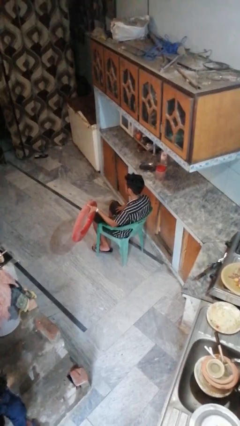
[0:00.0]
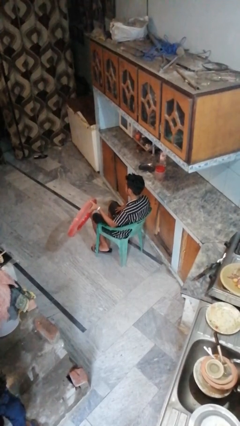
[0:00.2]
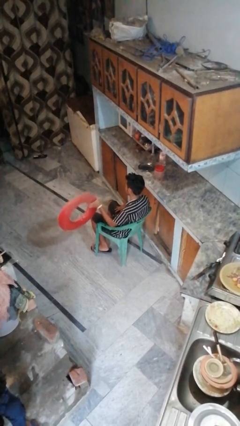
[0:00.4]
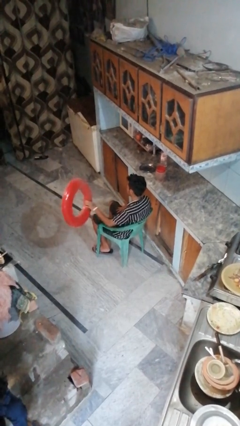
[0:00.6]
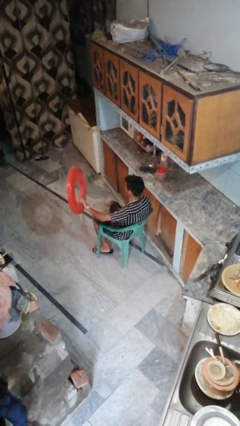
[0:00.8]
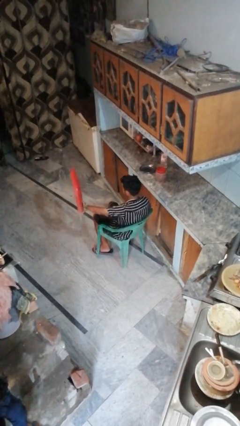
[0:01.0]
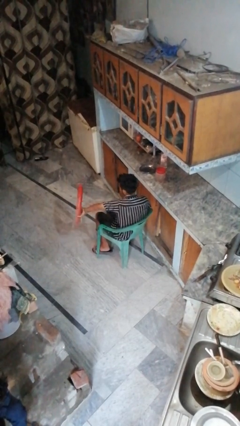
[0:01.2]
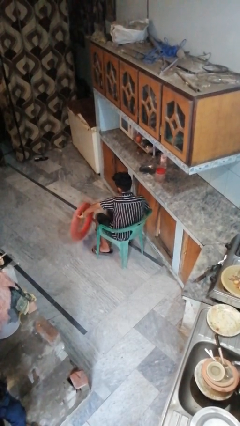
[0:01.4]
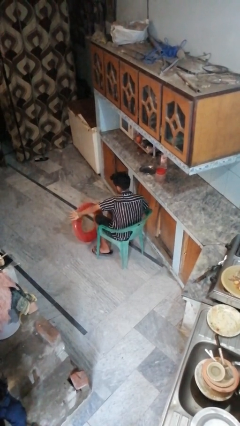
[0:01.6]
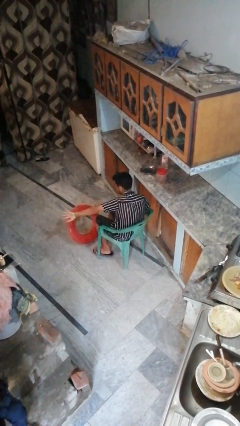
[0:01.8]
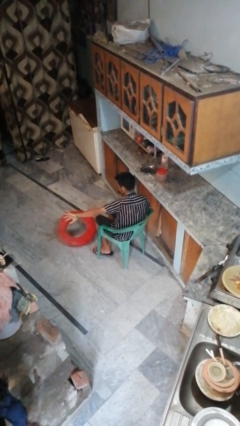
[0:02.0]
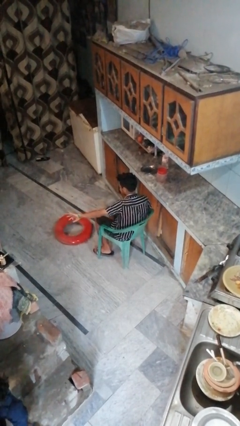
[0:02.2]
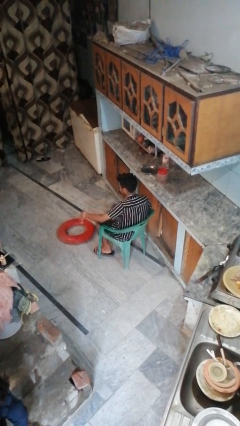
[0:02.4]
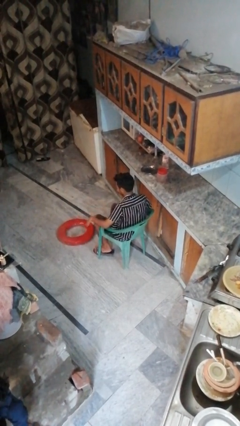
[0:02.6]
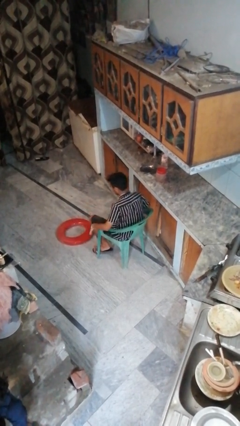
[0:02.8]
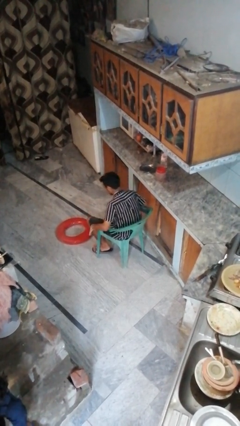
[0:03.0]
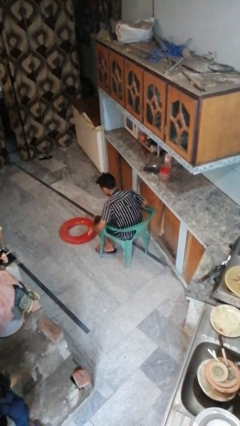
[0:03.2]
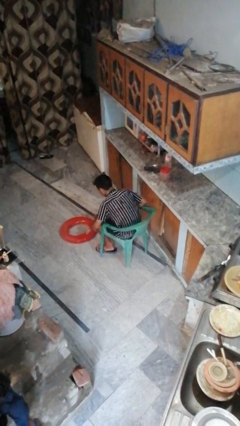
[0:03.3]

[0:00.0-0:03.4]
person throws object to ground

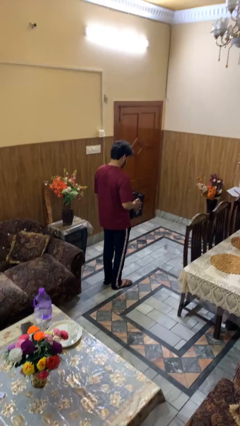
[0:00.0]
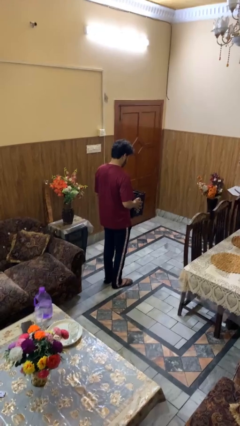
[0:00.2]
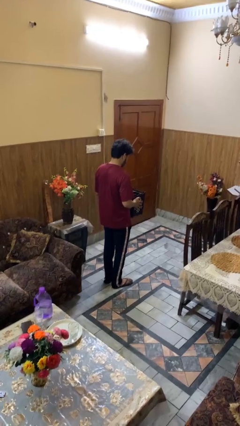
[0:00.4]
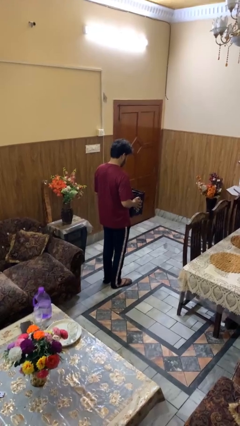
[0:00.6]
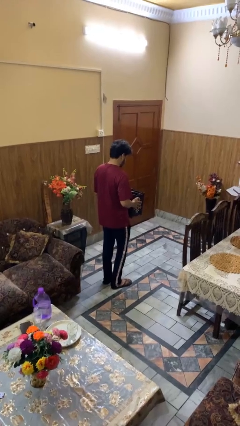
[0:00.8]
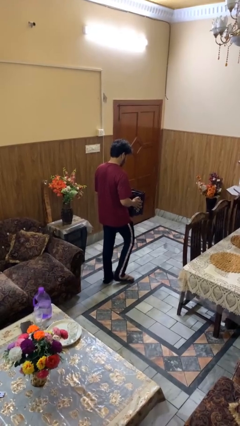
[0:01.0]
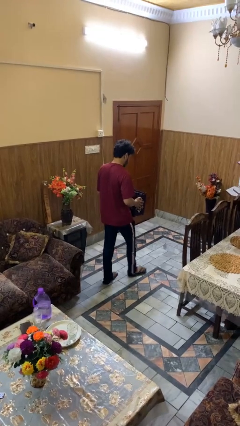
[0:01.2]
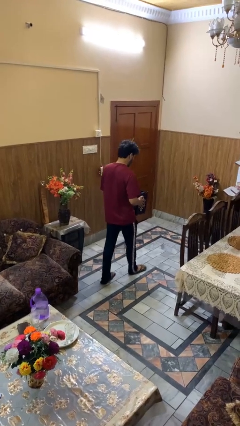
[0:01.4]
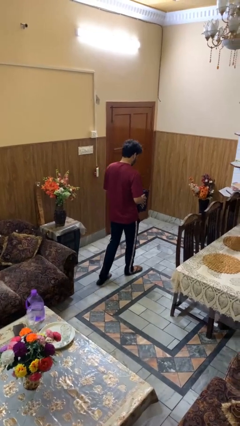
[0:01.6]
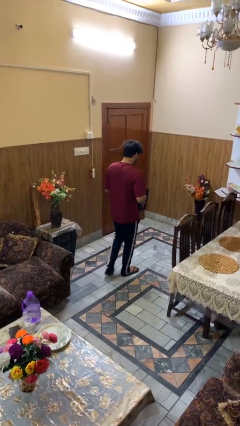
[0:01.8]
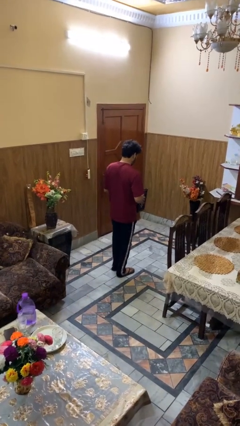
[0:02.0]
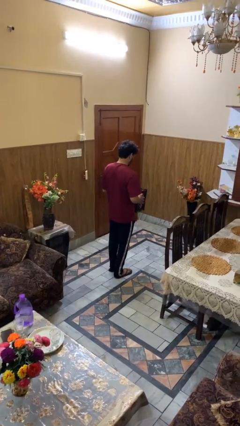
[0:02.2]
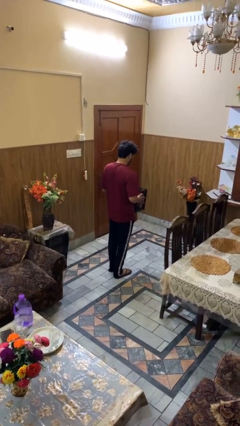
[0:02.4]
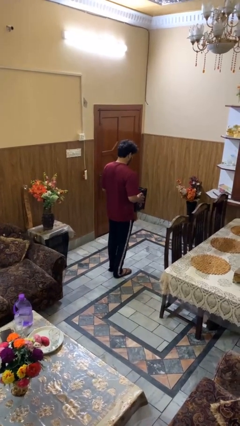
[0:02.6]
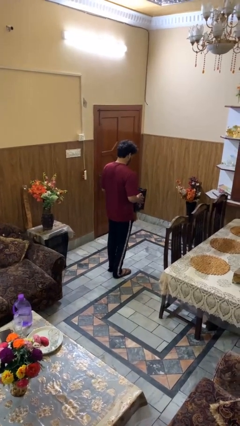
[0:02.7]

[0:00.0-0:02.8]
person carries groceries

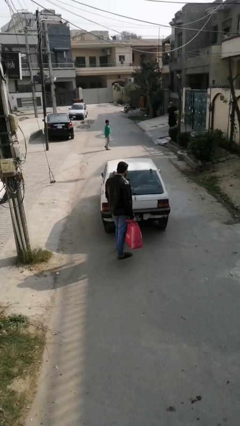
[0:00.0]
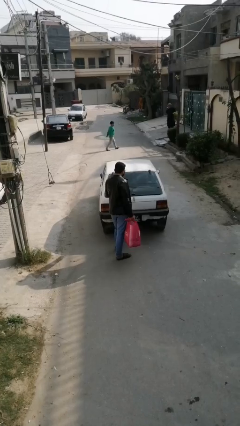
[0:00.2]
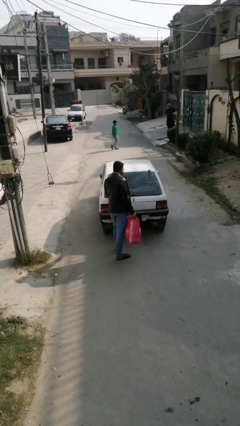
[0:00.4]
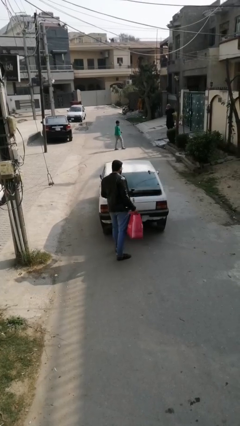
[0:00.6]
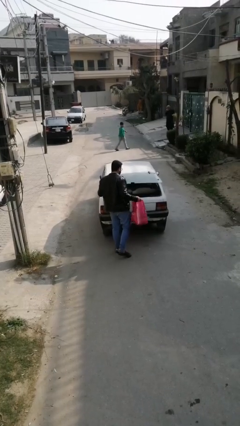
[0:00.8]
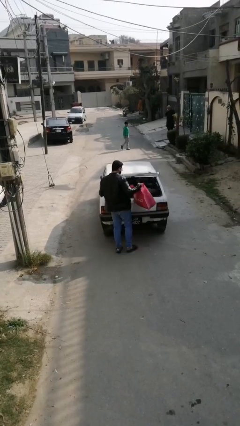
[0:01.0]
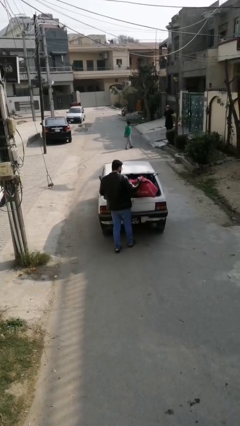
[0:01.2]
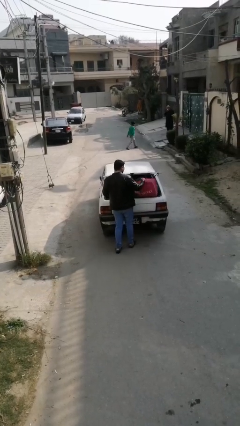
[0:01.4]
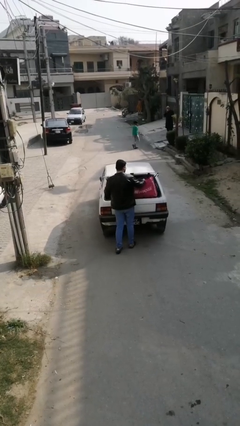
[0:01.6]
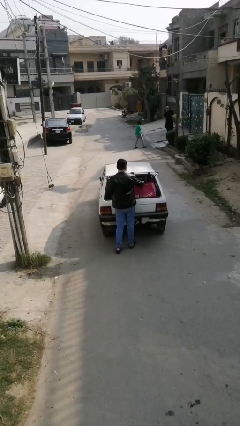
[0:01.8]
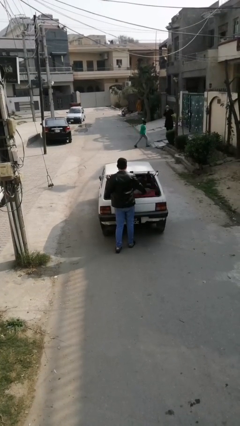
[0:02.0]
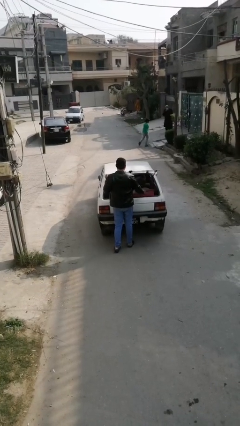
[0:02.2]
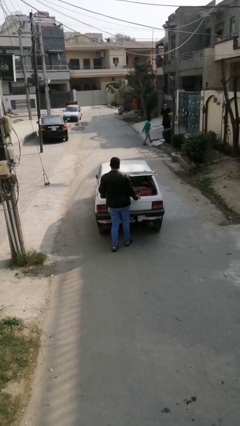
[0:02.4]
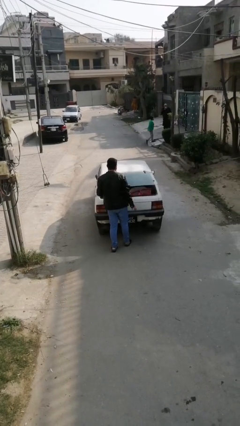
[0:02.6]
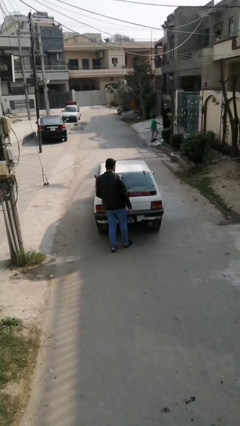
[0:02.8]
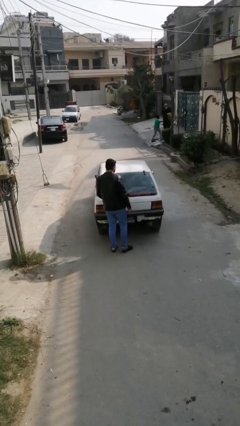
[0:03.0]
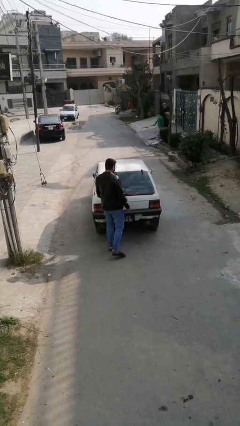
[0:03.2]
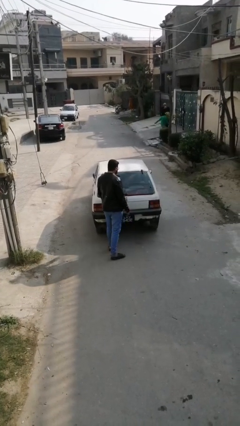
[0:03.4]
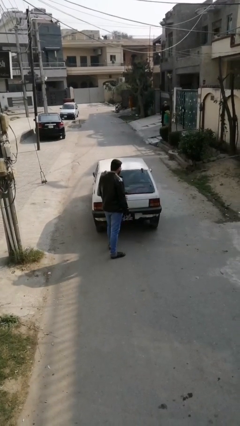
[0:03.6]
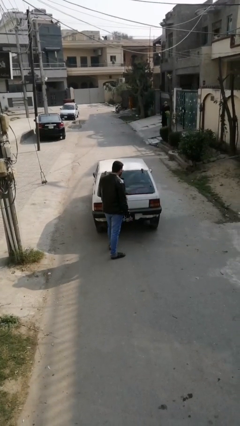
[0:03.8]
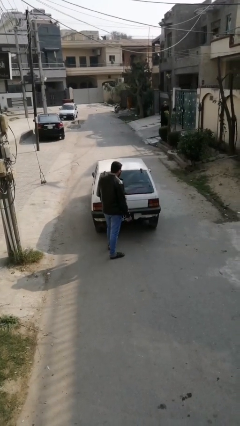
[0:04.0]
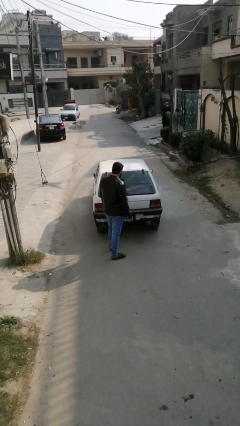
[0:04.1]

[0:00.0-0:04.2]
person loads car

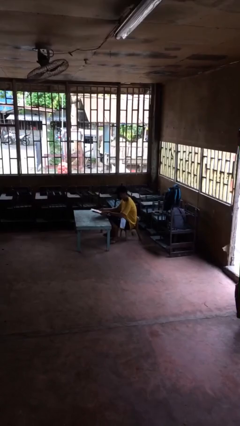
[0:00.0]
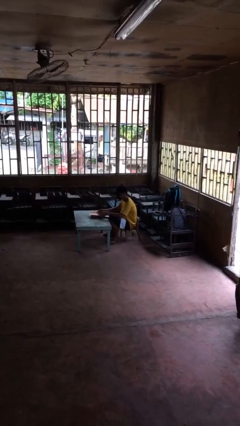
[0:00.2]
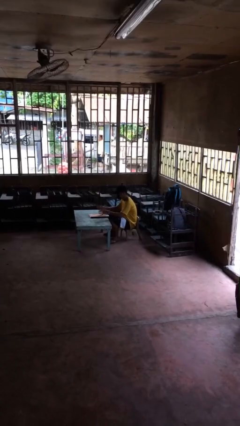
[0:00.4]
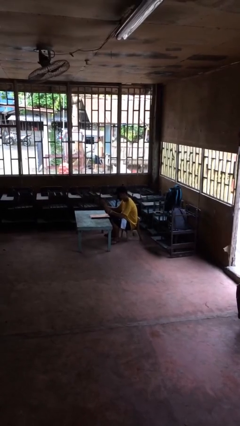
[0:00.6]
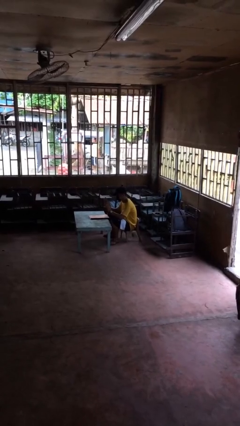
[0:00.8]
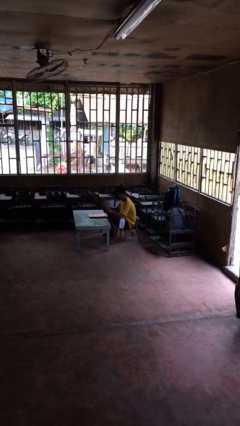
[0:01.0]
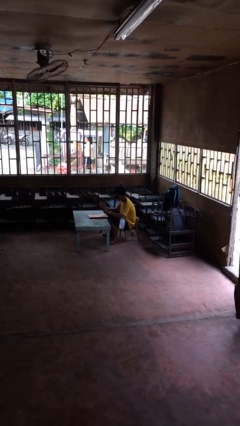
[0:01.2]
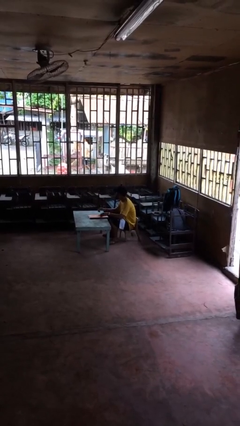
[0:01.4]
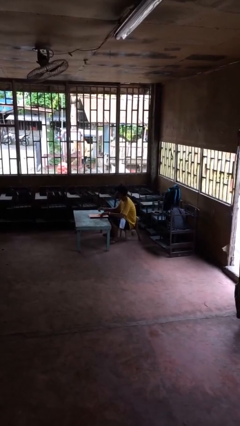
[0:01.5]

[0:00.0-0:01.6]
person puts down object on table

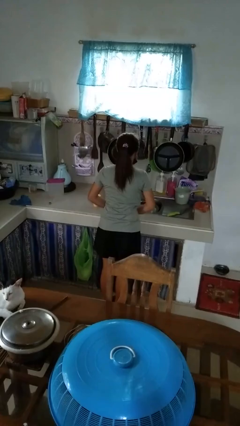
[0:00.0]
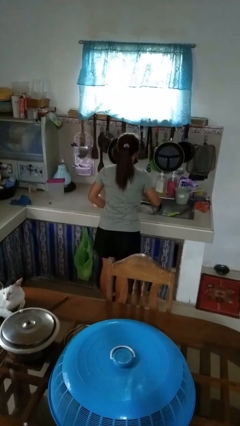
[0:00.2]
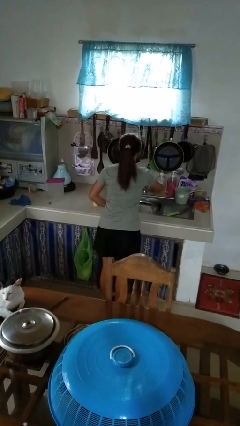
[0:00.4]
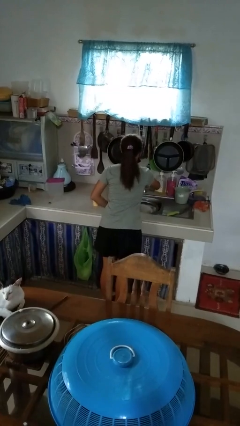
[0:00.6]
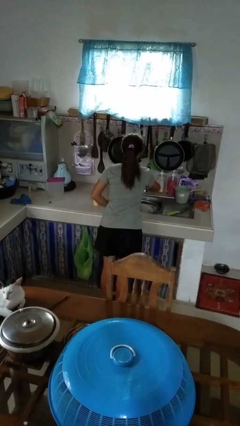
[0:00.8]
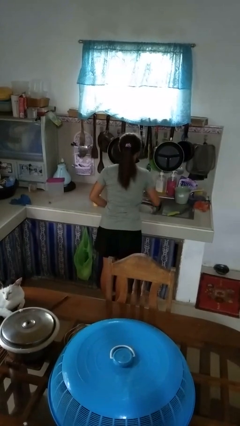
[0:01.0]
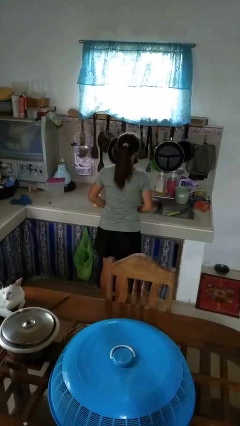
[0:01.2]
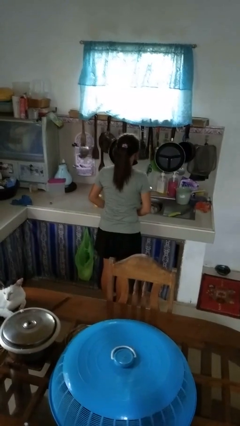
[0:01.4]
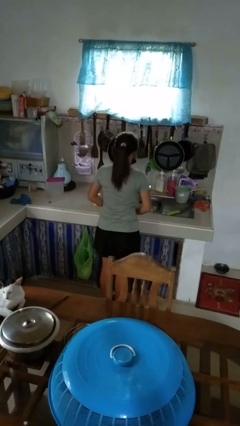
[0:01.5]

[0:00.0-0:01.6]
person turns off faucet

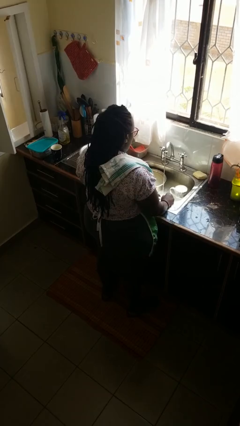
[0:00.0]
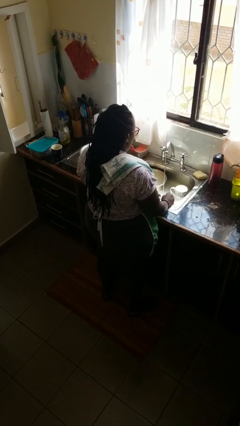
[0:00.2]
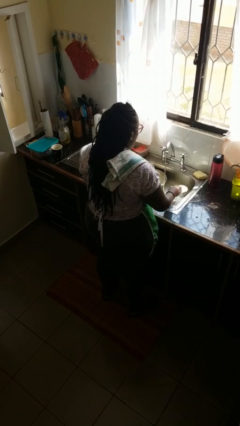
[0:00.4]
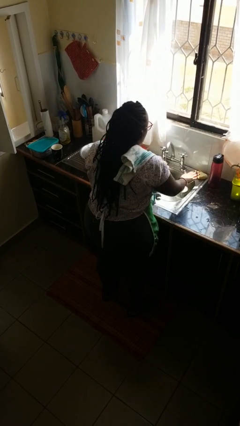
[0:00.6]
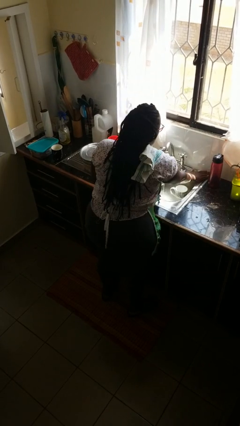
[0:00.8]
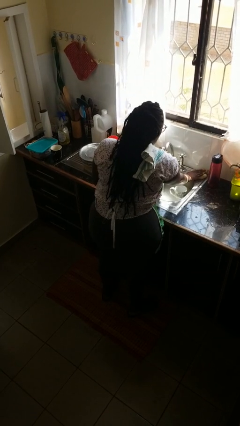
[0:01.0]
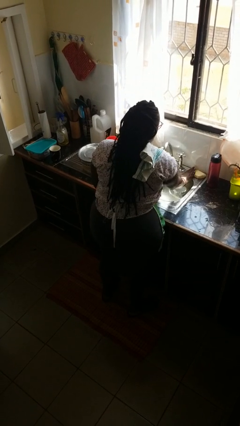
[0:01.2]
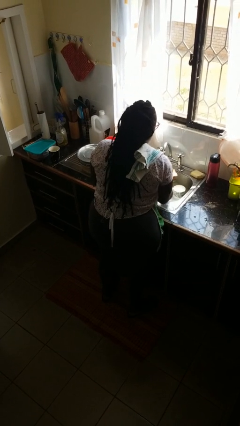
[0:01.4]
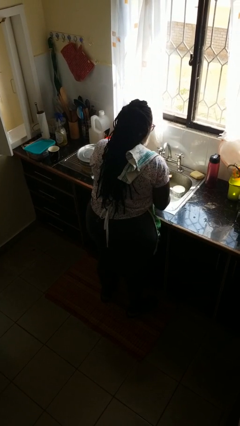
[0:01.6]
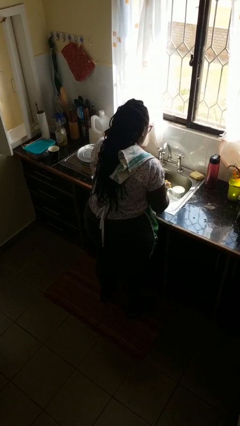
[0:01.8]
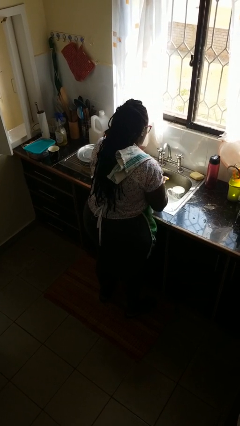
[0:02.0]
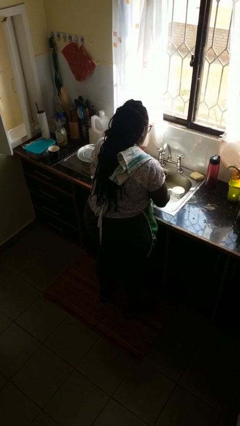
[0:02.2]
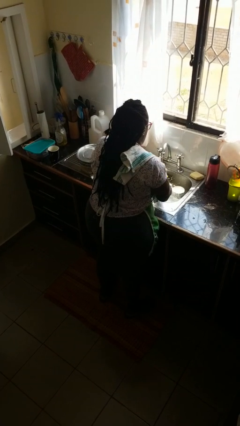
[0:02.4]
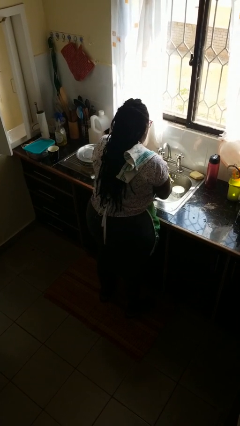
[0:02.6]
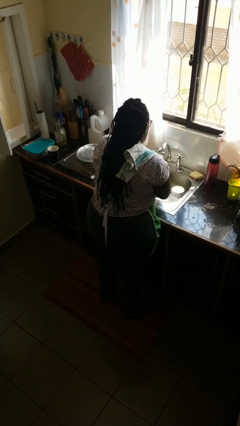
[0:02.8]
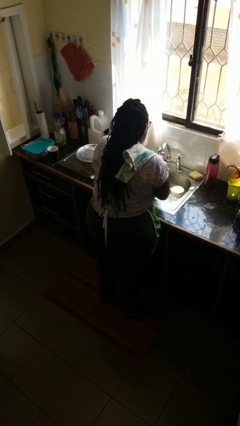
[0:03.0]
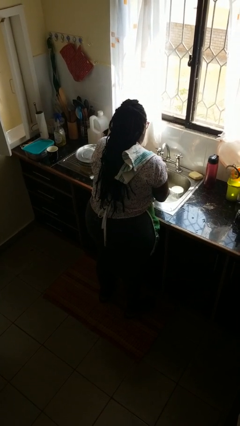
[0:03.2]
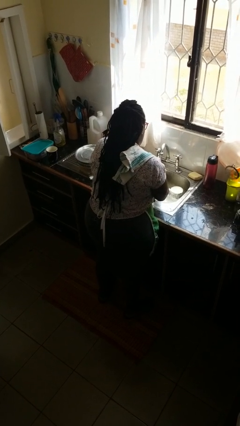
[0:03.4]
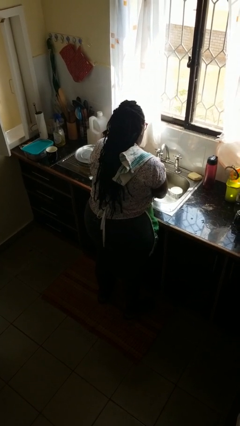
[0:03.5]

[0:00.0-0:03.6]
person washes hands

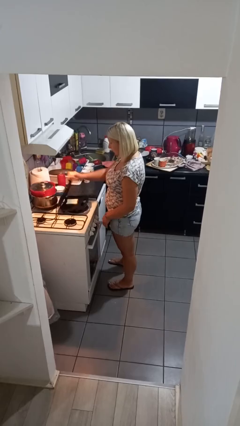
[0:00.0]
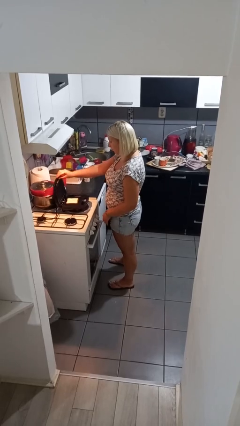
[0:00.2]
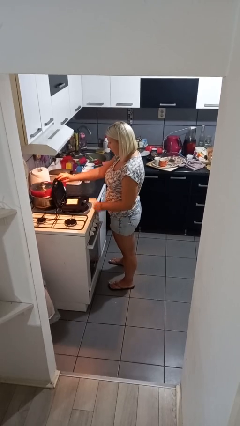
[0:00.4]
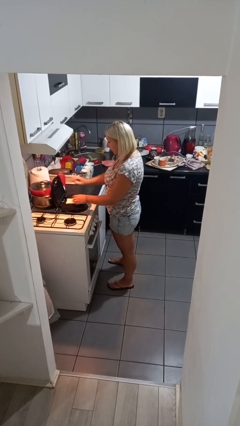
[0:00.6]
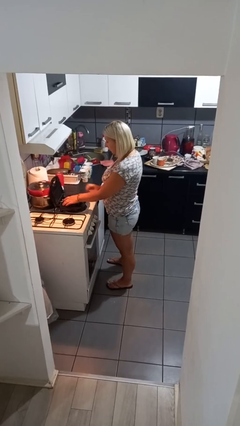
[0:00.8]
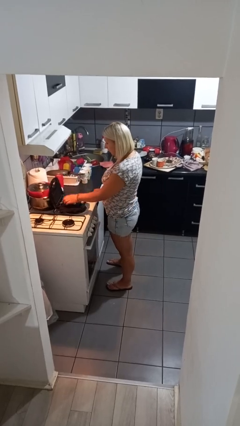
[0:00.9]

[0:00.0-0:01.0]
person takes object from toaster
